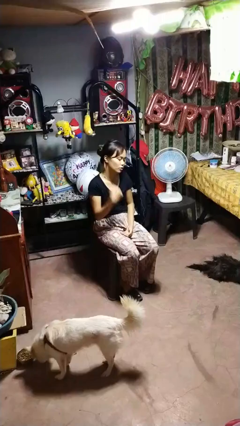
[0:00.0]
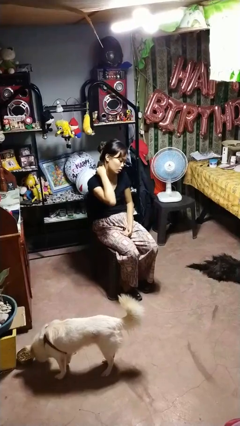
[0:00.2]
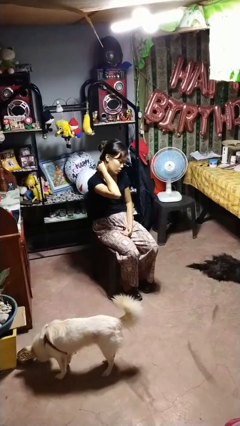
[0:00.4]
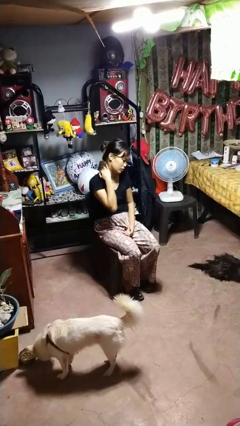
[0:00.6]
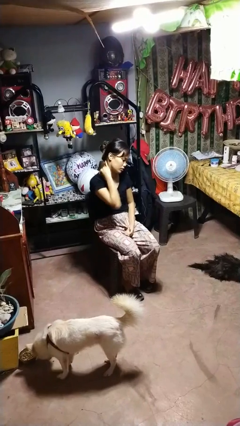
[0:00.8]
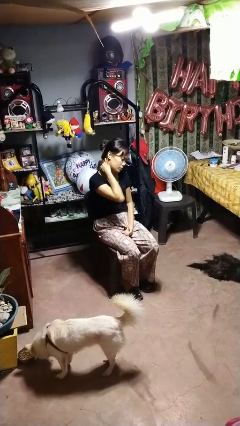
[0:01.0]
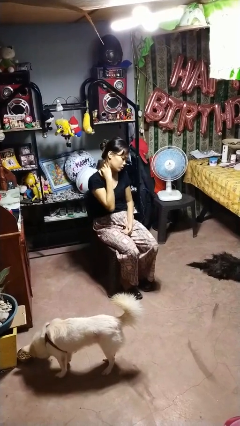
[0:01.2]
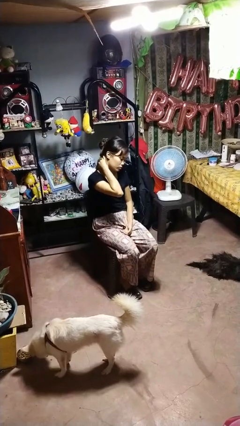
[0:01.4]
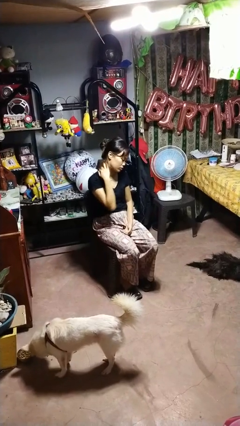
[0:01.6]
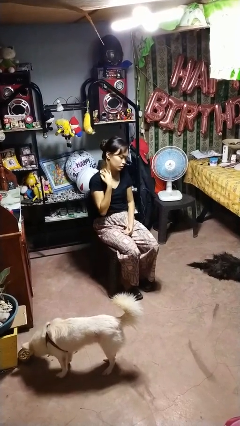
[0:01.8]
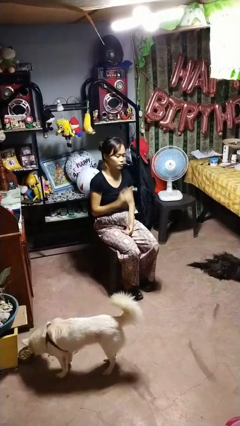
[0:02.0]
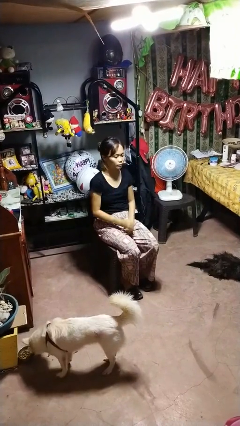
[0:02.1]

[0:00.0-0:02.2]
person rubs neck

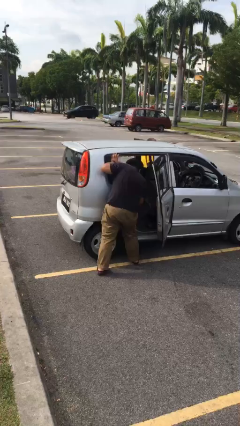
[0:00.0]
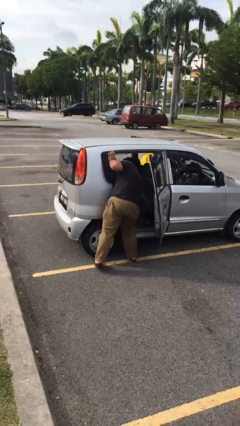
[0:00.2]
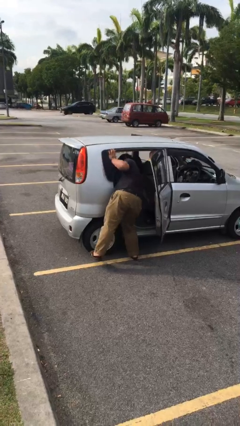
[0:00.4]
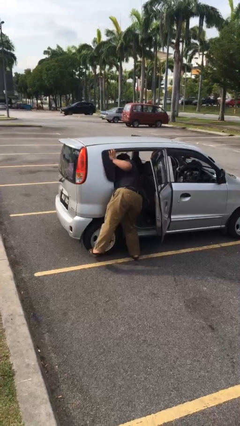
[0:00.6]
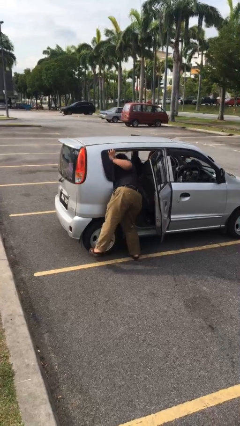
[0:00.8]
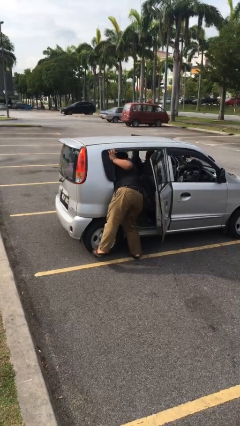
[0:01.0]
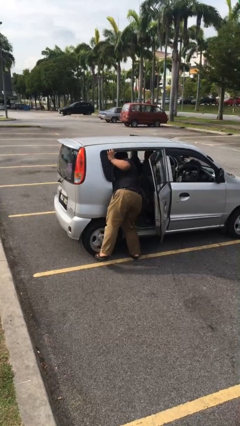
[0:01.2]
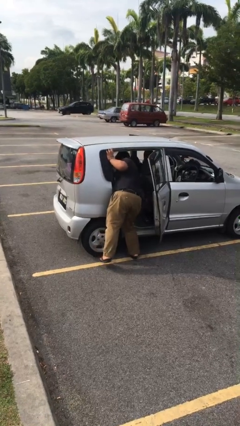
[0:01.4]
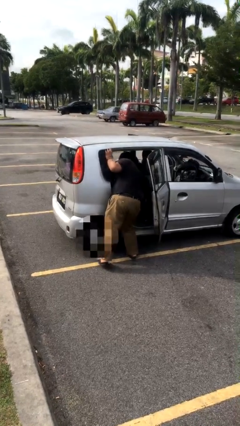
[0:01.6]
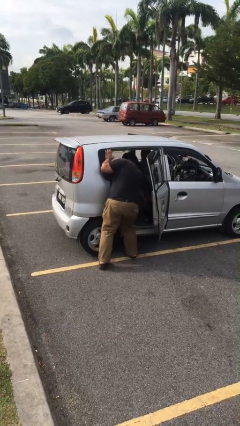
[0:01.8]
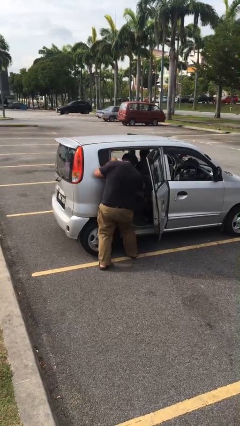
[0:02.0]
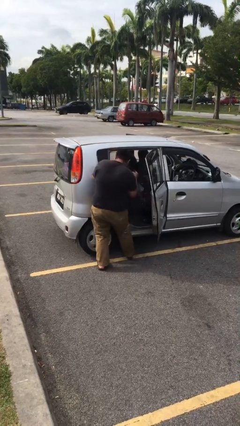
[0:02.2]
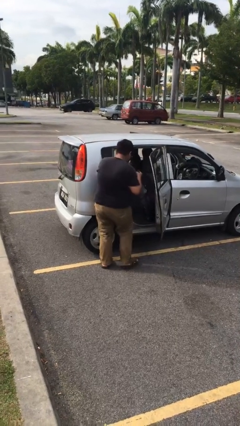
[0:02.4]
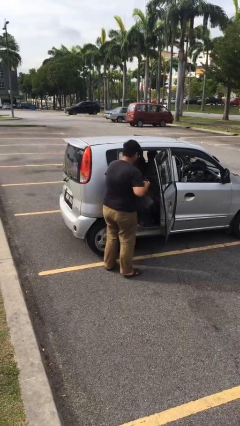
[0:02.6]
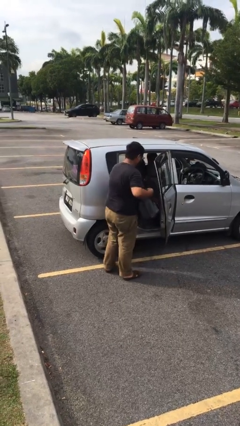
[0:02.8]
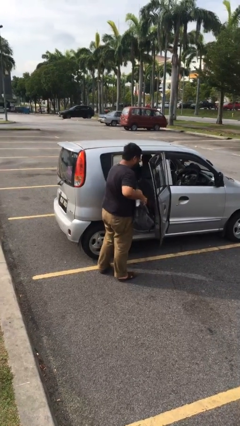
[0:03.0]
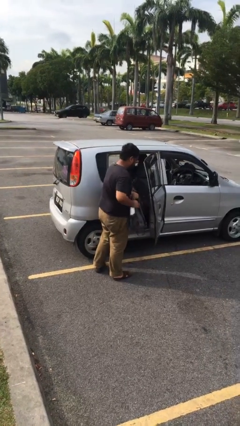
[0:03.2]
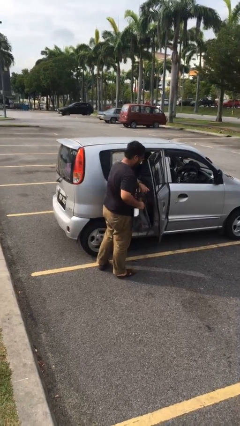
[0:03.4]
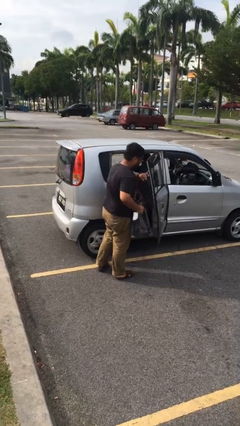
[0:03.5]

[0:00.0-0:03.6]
person unloads car

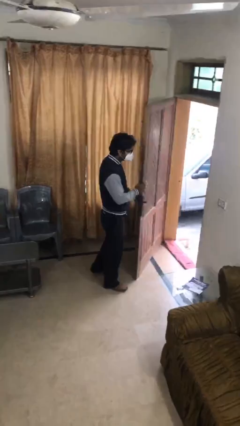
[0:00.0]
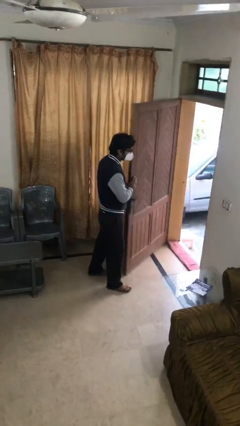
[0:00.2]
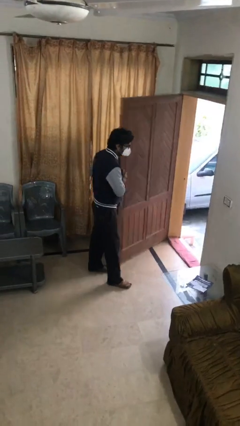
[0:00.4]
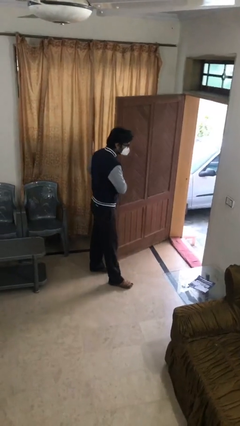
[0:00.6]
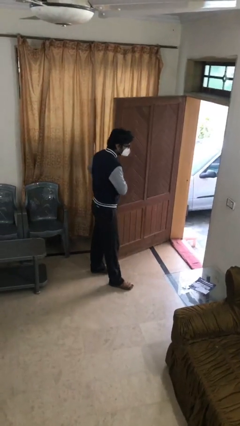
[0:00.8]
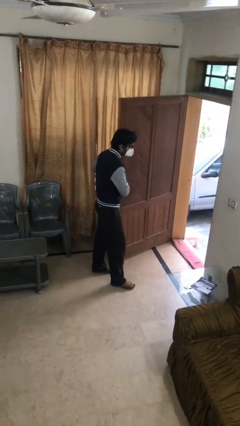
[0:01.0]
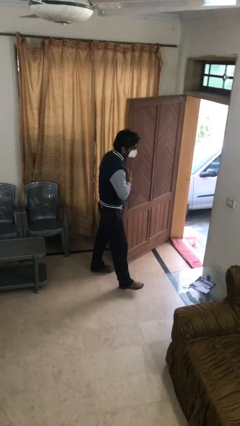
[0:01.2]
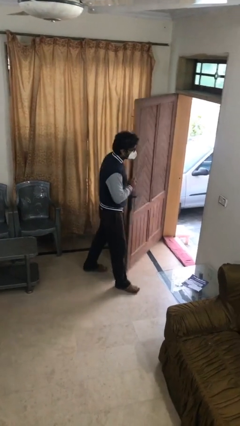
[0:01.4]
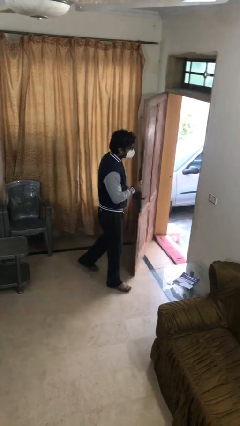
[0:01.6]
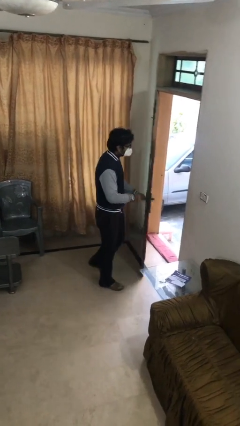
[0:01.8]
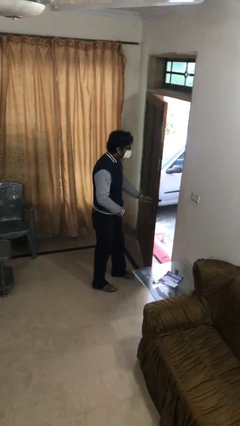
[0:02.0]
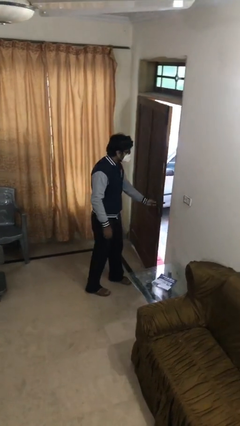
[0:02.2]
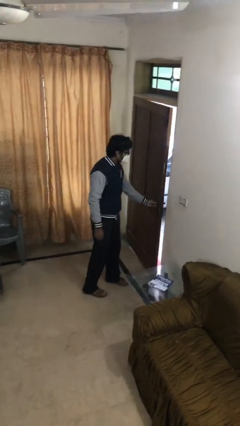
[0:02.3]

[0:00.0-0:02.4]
person closes facility door

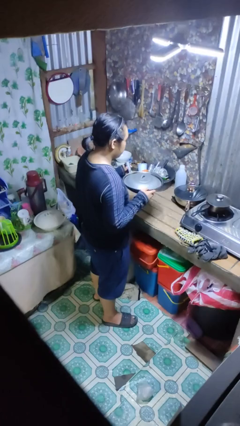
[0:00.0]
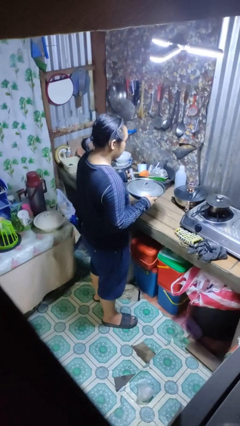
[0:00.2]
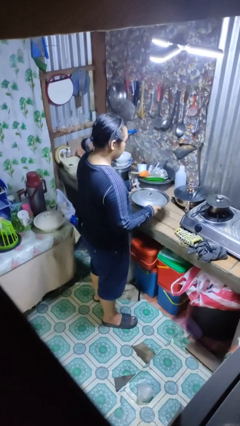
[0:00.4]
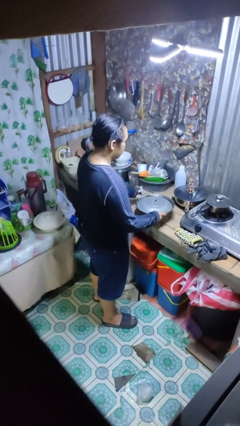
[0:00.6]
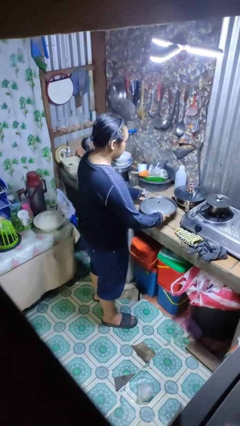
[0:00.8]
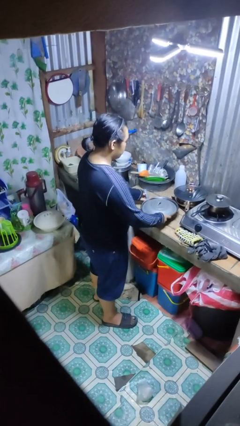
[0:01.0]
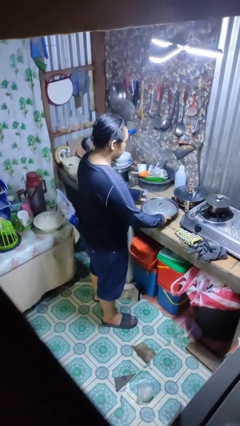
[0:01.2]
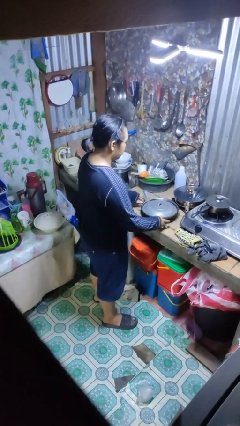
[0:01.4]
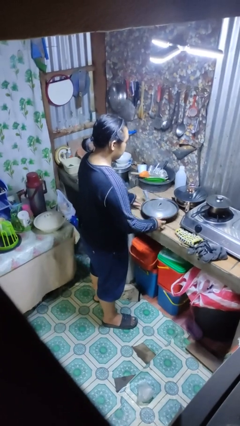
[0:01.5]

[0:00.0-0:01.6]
person puts down object on countertop

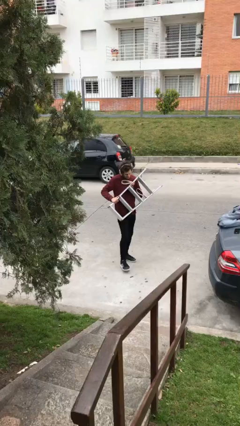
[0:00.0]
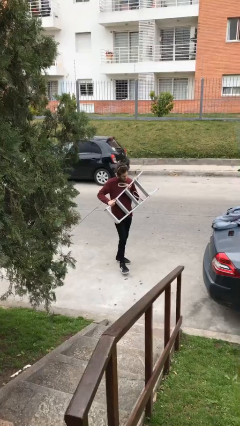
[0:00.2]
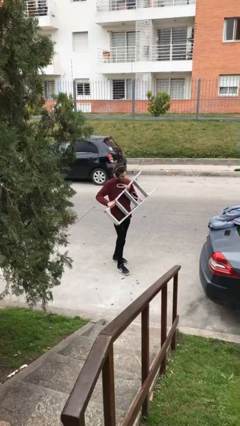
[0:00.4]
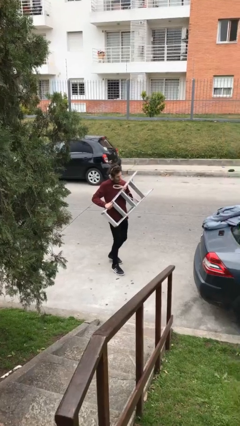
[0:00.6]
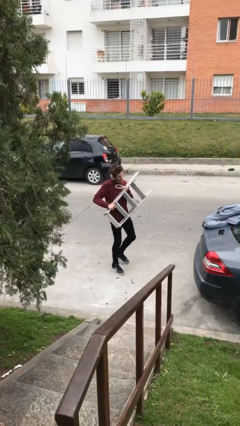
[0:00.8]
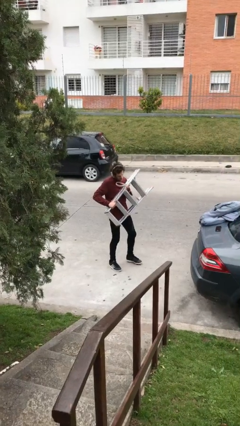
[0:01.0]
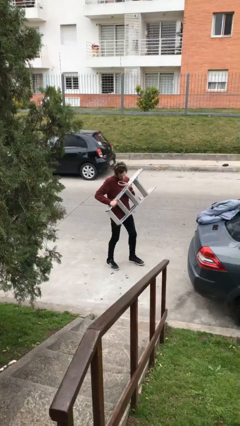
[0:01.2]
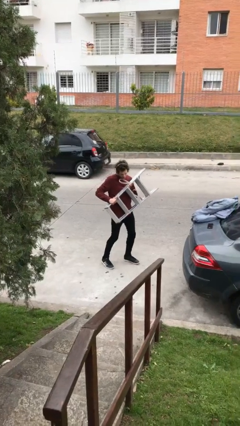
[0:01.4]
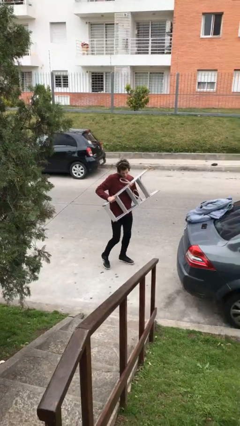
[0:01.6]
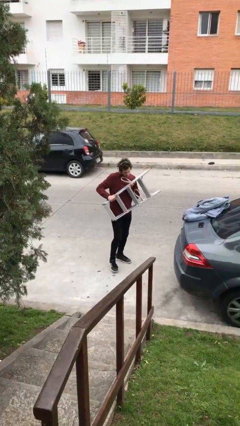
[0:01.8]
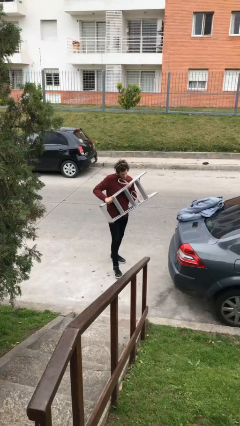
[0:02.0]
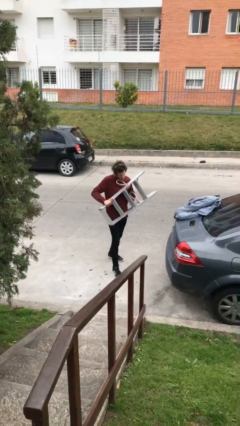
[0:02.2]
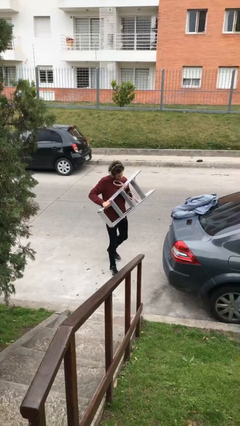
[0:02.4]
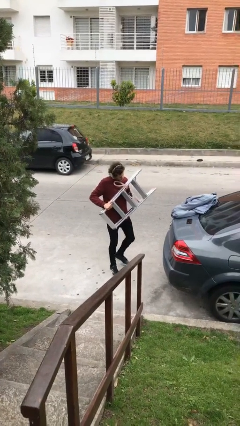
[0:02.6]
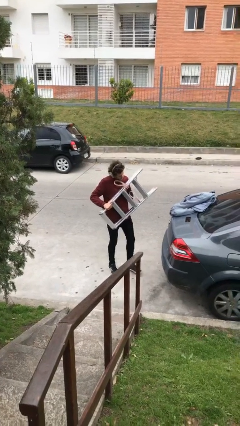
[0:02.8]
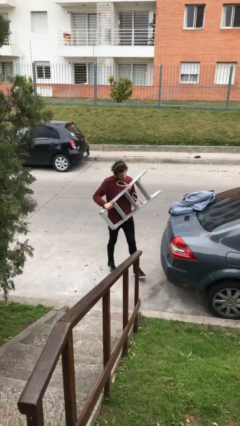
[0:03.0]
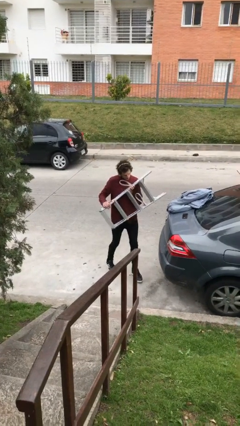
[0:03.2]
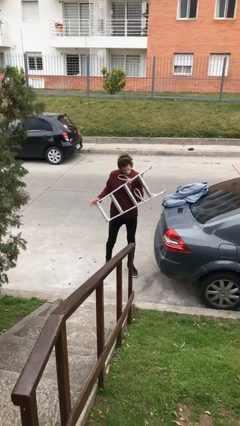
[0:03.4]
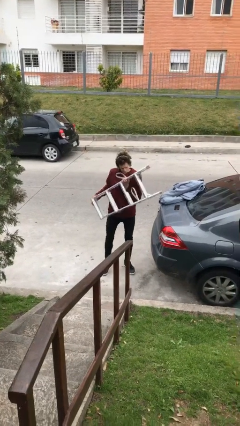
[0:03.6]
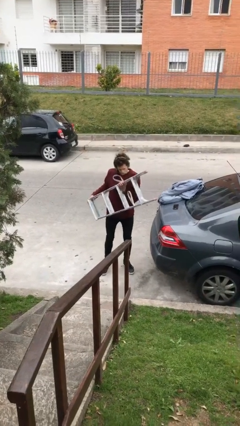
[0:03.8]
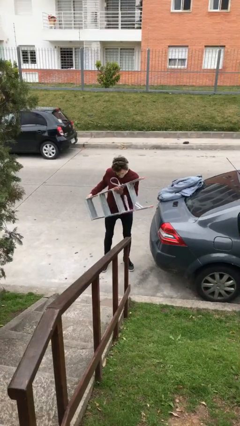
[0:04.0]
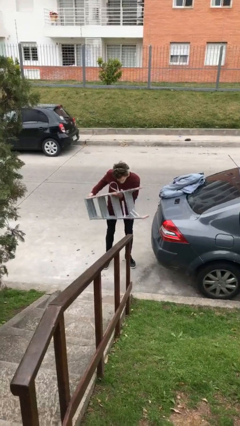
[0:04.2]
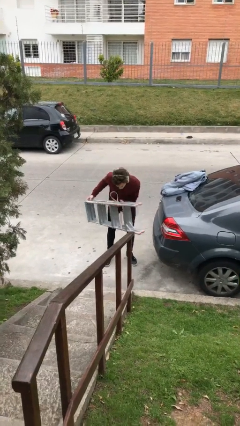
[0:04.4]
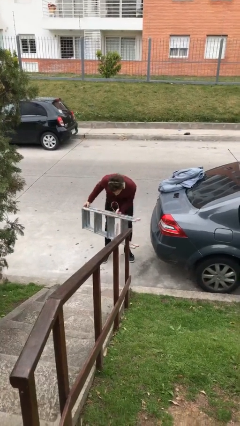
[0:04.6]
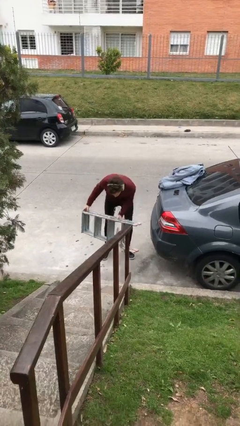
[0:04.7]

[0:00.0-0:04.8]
person carries heavy object

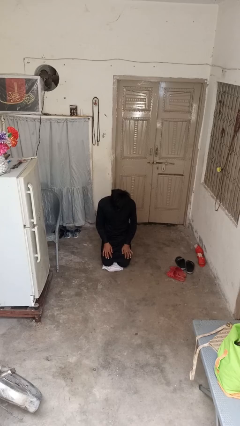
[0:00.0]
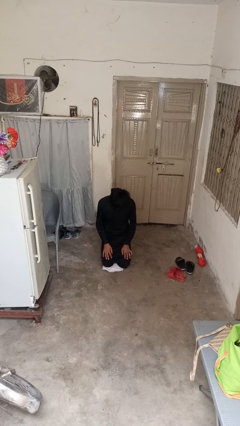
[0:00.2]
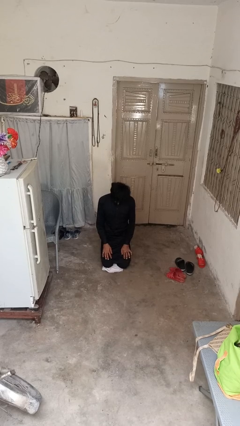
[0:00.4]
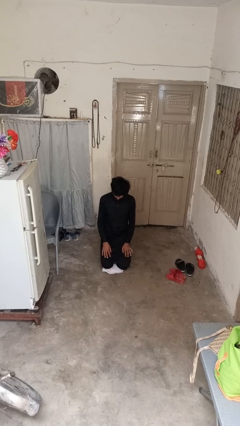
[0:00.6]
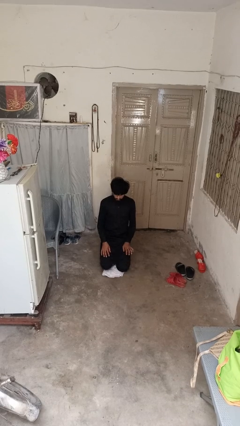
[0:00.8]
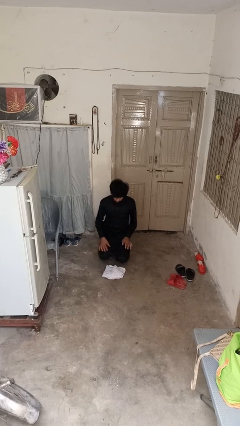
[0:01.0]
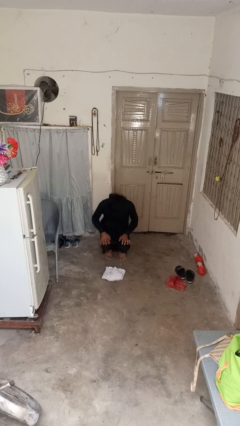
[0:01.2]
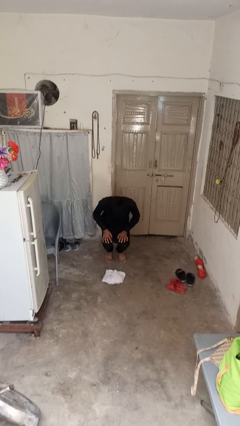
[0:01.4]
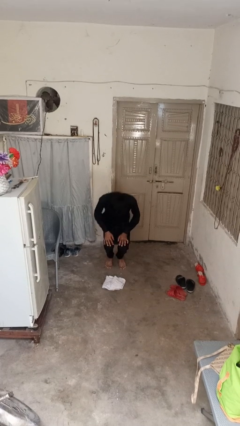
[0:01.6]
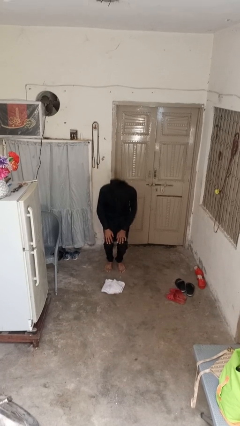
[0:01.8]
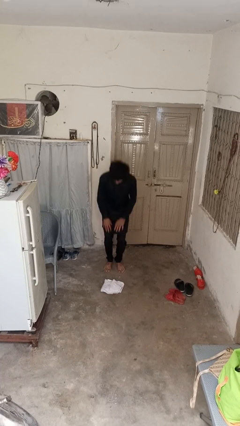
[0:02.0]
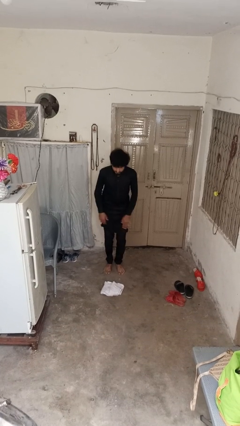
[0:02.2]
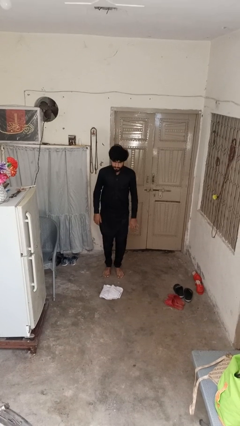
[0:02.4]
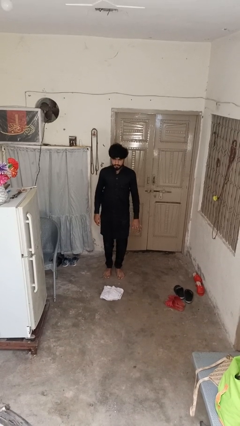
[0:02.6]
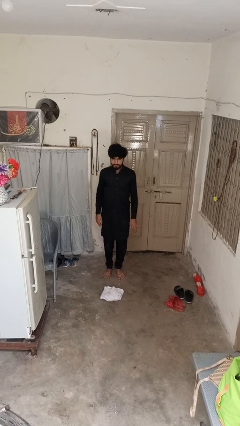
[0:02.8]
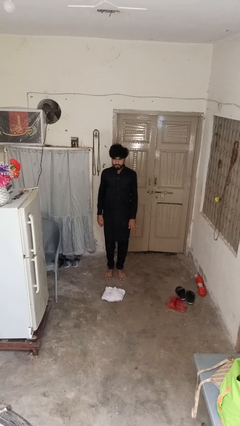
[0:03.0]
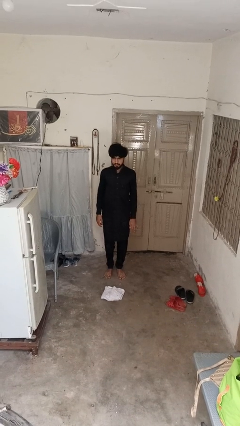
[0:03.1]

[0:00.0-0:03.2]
person stands up from floor
